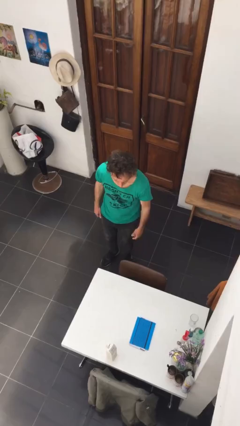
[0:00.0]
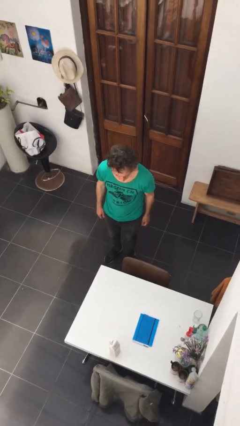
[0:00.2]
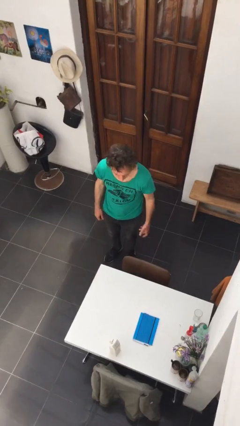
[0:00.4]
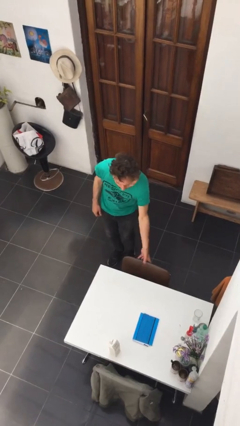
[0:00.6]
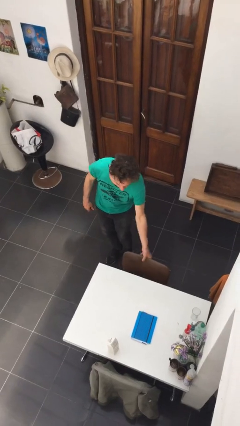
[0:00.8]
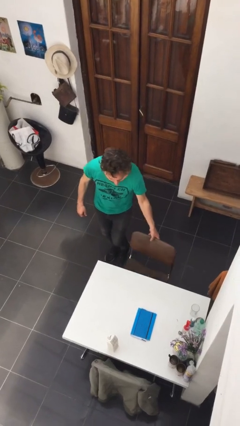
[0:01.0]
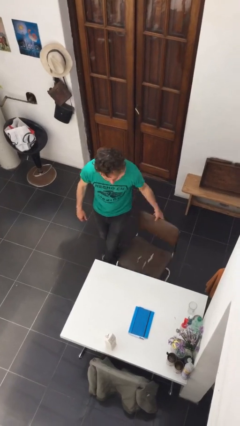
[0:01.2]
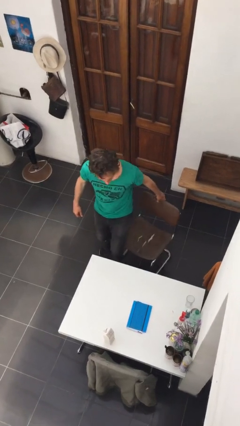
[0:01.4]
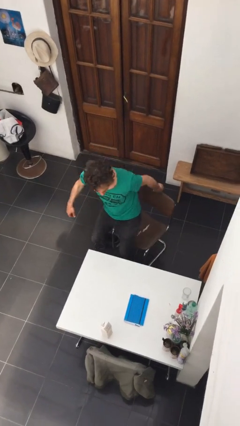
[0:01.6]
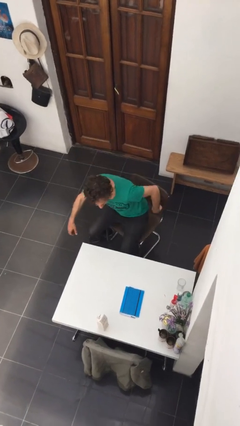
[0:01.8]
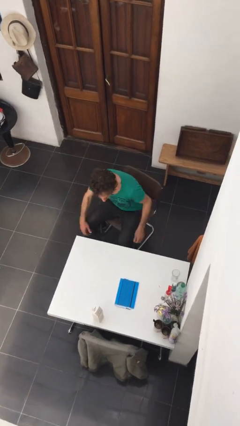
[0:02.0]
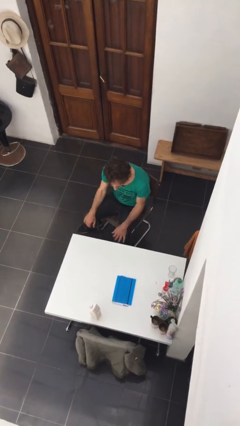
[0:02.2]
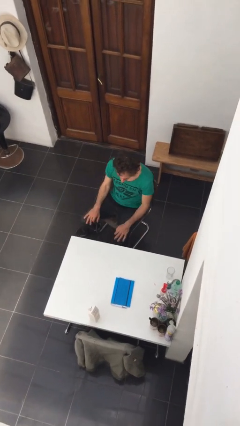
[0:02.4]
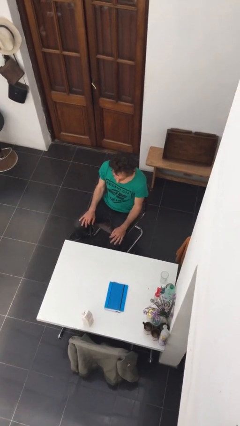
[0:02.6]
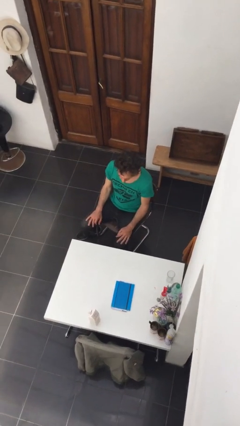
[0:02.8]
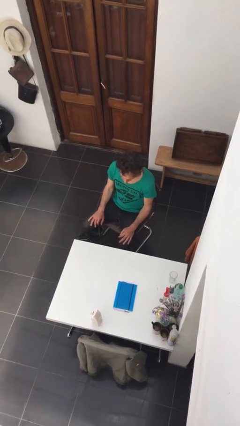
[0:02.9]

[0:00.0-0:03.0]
person sits down

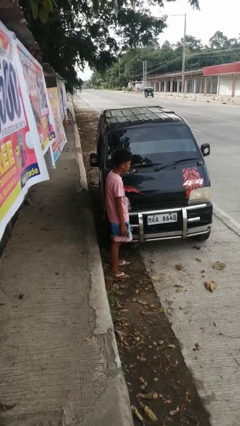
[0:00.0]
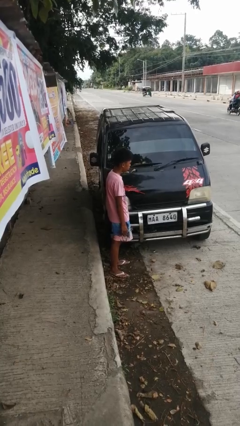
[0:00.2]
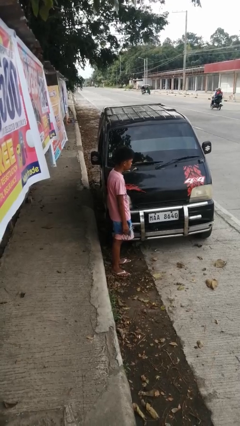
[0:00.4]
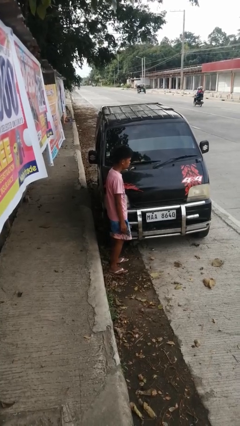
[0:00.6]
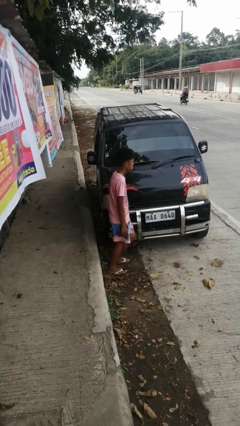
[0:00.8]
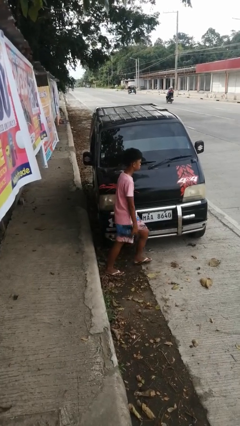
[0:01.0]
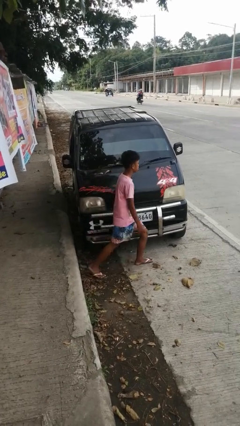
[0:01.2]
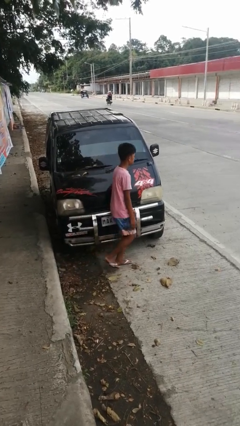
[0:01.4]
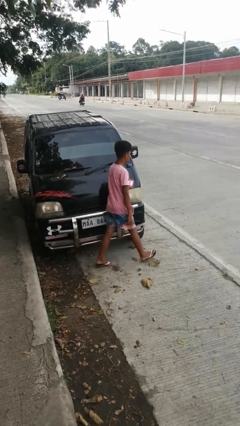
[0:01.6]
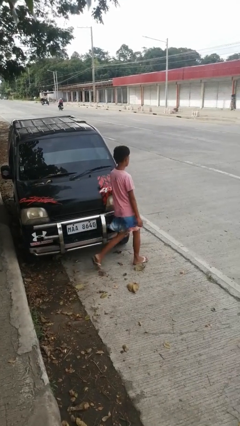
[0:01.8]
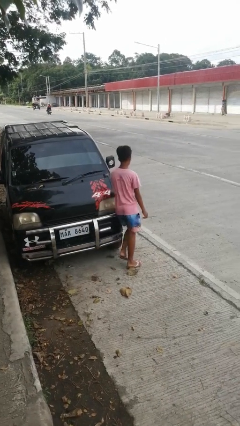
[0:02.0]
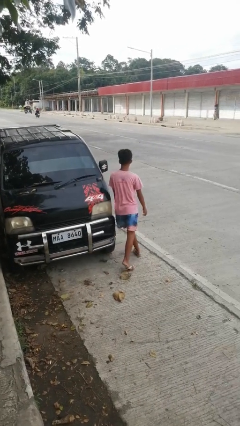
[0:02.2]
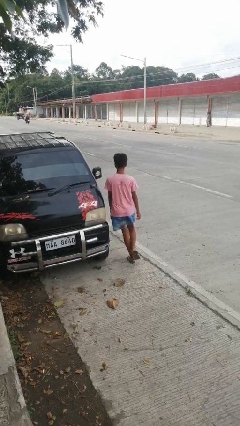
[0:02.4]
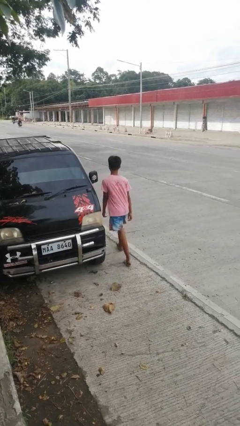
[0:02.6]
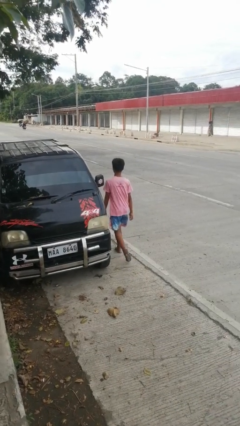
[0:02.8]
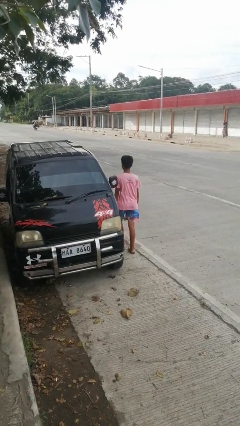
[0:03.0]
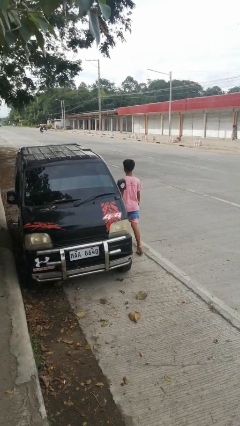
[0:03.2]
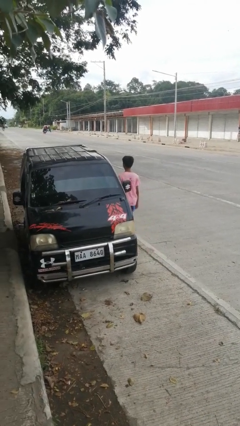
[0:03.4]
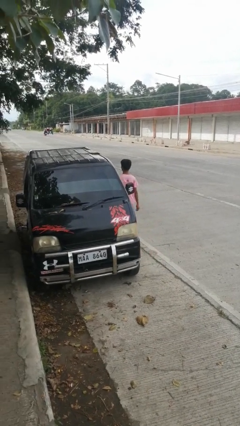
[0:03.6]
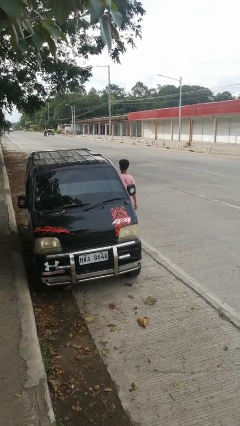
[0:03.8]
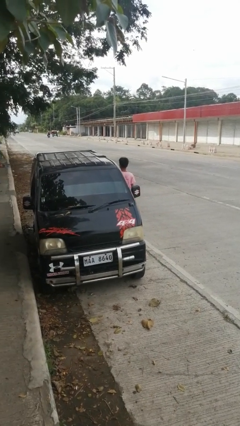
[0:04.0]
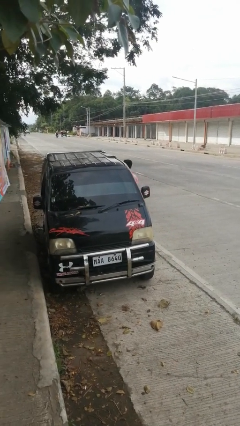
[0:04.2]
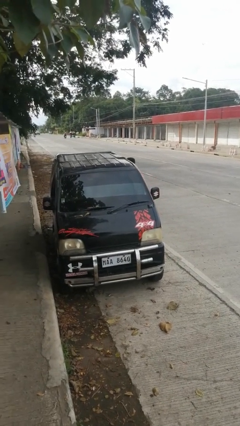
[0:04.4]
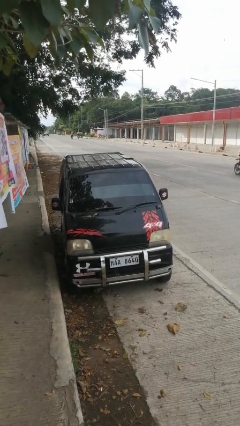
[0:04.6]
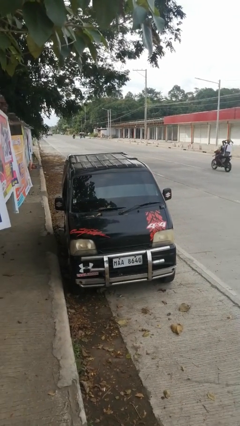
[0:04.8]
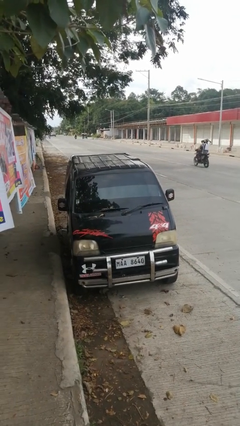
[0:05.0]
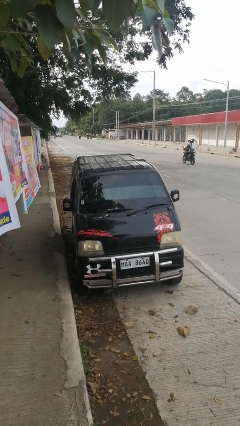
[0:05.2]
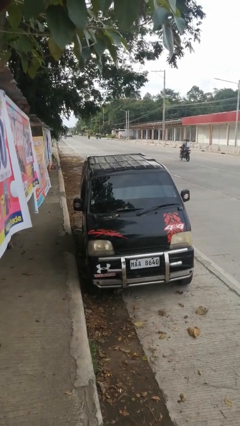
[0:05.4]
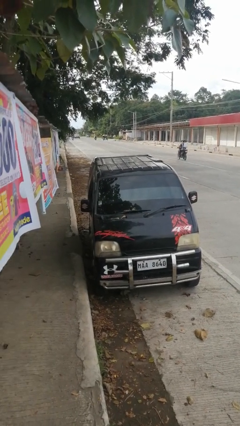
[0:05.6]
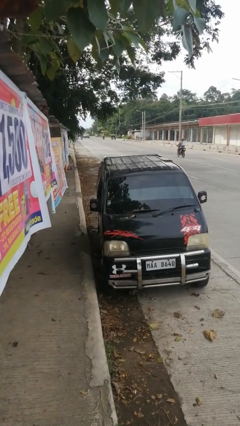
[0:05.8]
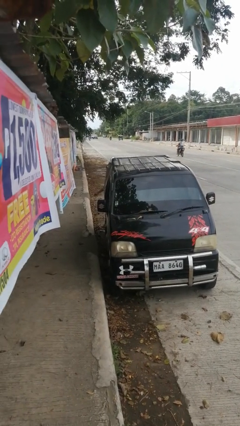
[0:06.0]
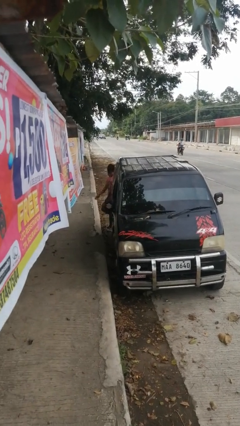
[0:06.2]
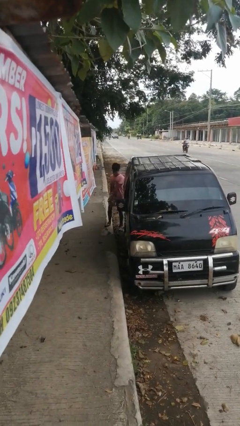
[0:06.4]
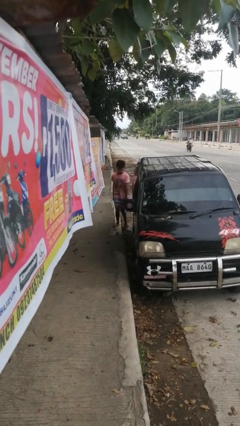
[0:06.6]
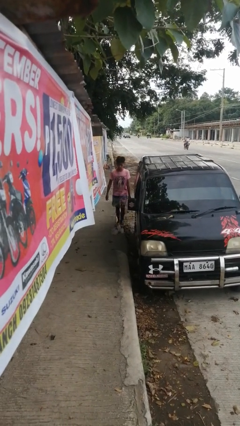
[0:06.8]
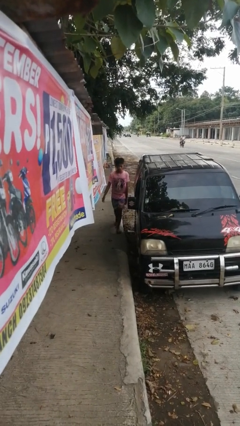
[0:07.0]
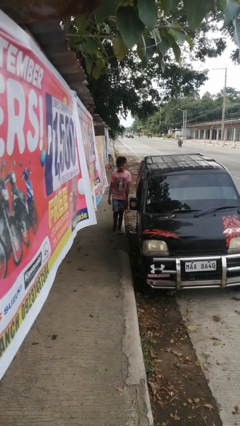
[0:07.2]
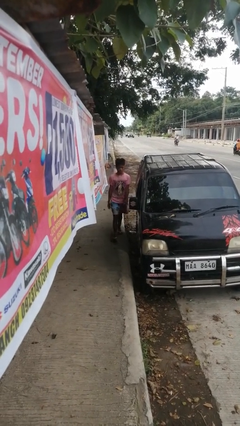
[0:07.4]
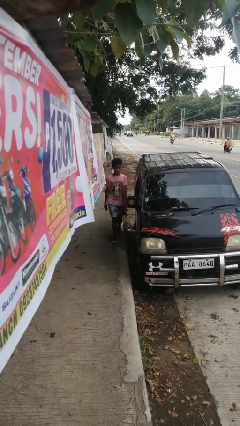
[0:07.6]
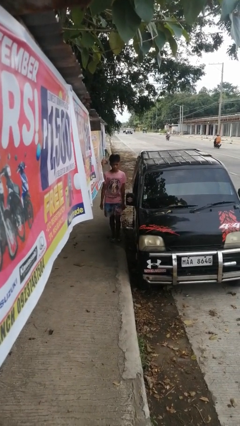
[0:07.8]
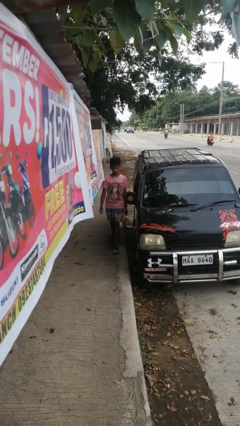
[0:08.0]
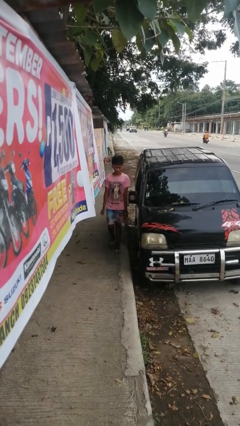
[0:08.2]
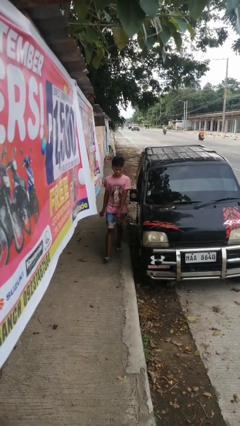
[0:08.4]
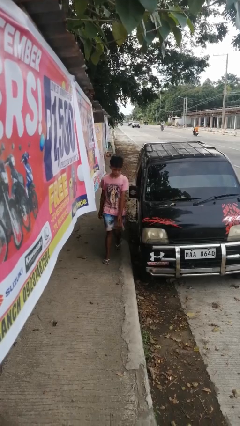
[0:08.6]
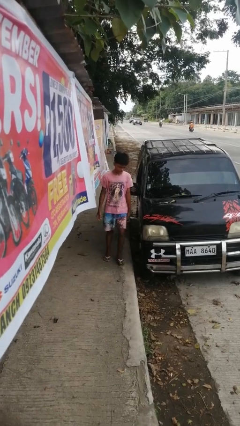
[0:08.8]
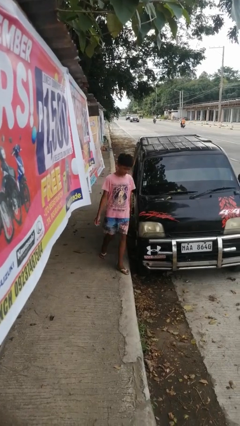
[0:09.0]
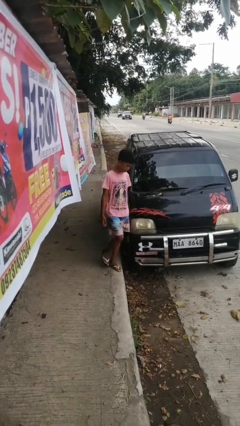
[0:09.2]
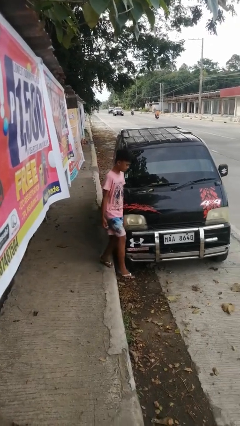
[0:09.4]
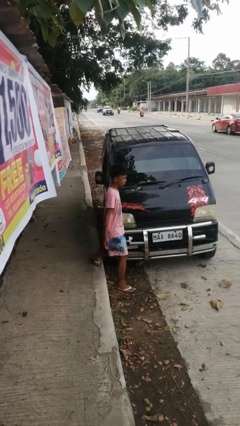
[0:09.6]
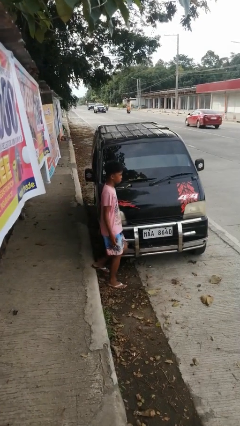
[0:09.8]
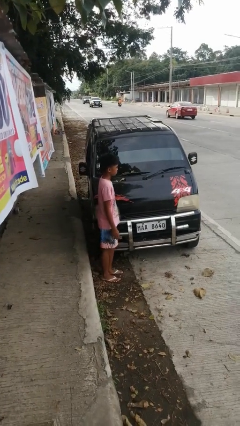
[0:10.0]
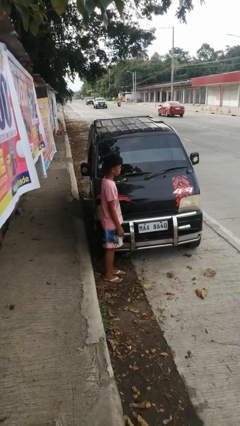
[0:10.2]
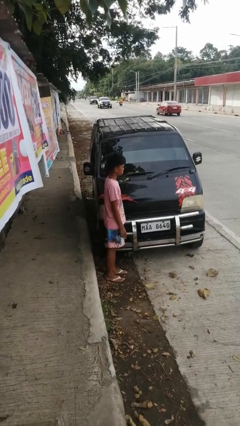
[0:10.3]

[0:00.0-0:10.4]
person walks around car

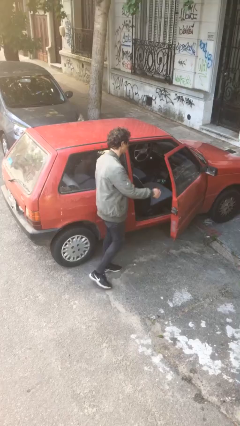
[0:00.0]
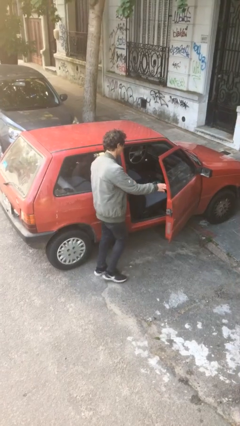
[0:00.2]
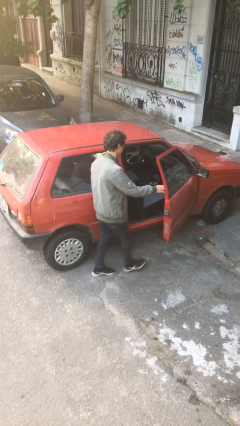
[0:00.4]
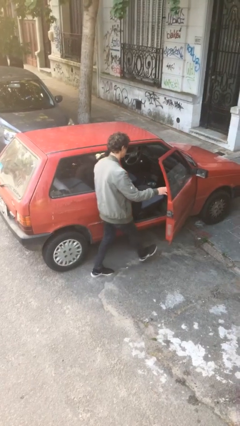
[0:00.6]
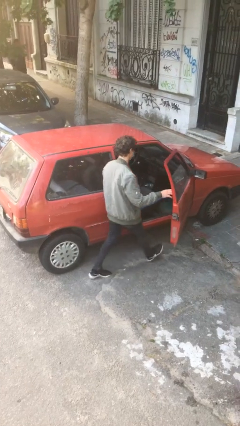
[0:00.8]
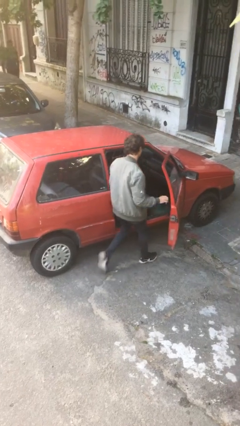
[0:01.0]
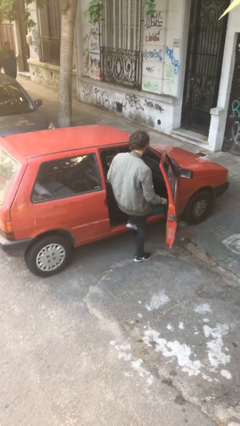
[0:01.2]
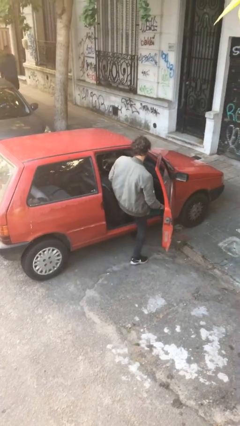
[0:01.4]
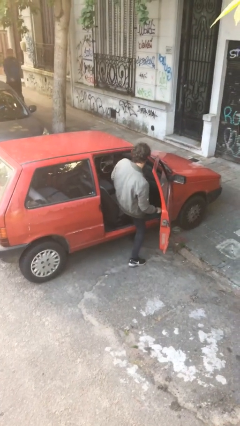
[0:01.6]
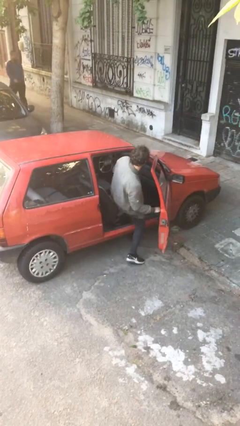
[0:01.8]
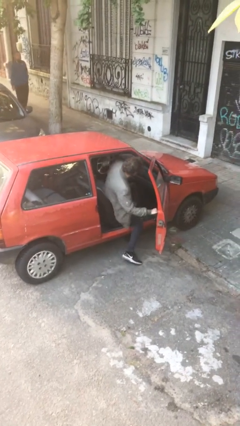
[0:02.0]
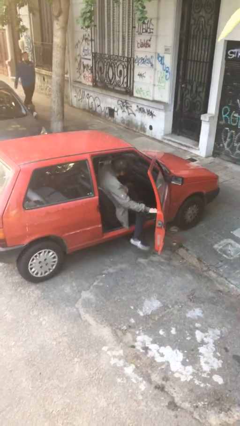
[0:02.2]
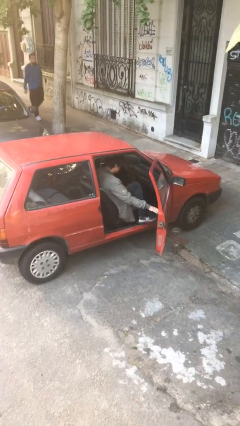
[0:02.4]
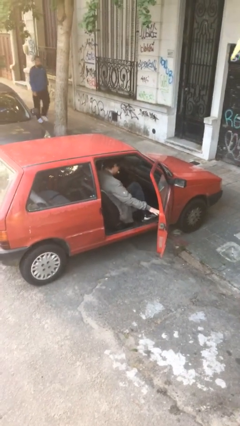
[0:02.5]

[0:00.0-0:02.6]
person enters car

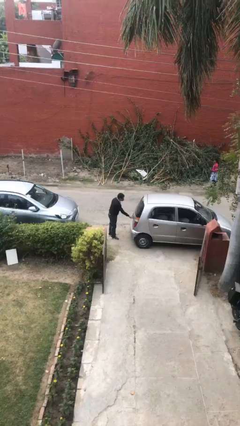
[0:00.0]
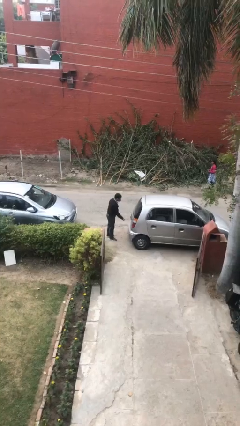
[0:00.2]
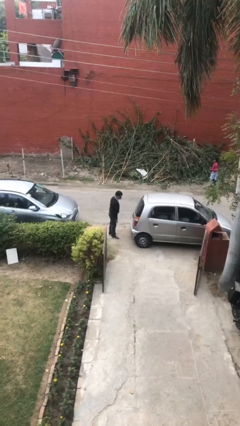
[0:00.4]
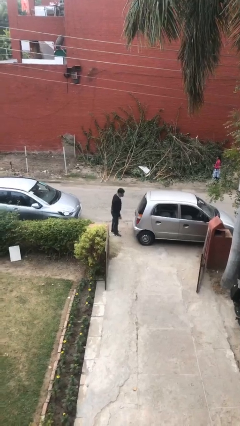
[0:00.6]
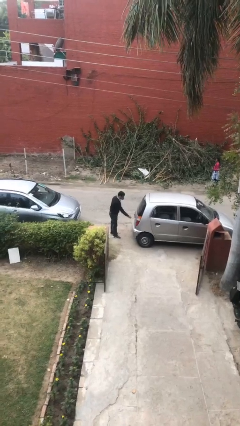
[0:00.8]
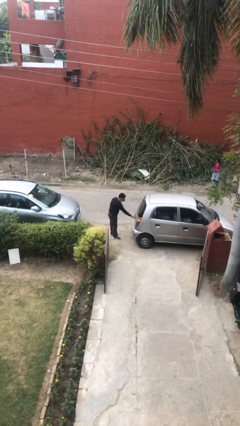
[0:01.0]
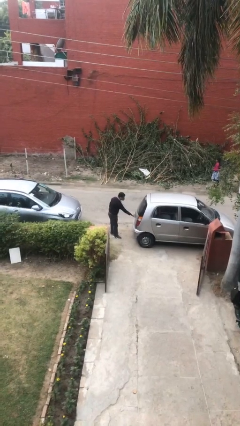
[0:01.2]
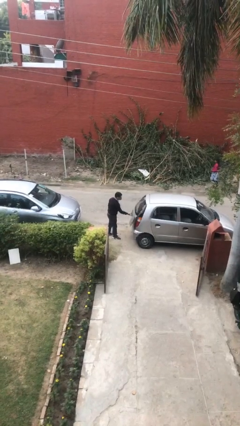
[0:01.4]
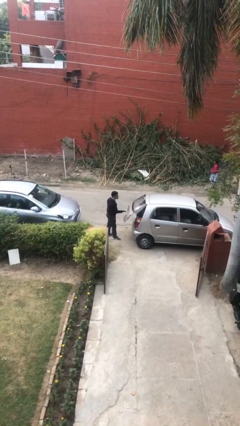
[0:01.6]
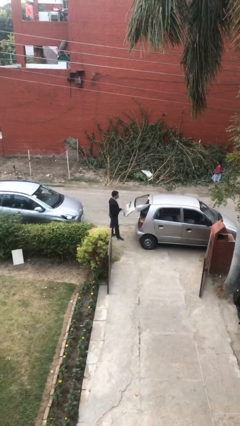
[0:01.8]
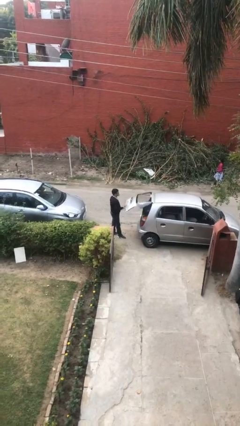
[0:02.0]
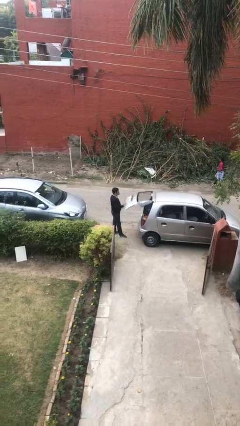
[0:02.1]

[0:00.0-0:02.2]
person opens car trunk
